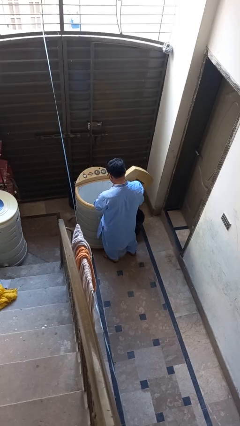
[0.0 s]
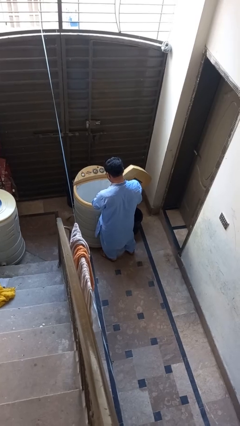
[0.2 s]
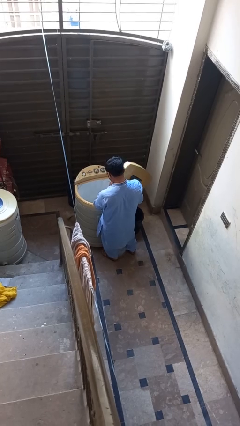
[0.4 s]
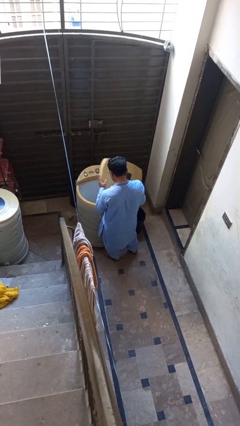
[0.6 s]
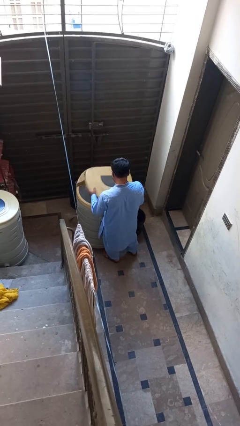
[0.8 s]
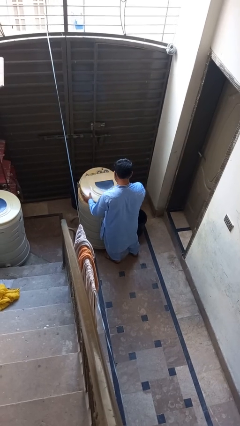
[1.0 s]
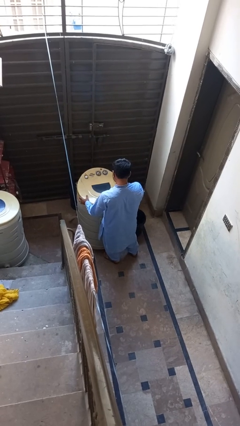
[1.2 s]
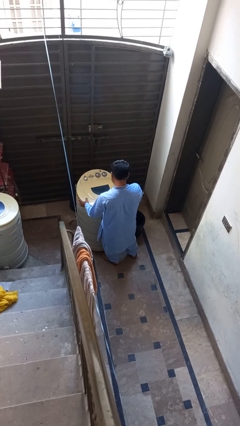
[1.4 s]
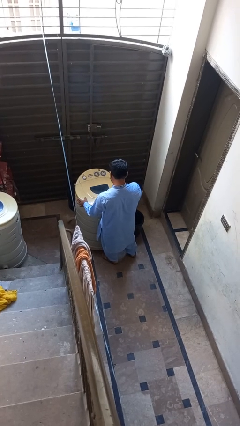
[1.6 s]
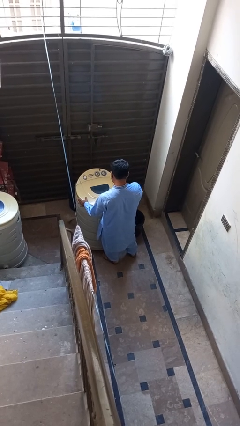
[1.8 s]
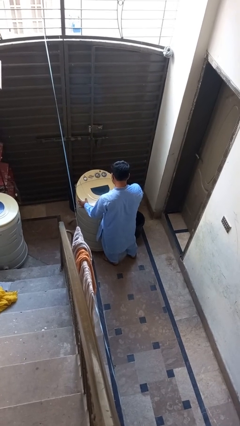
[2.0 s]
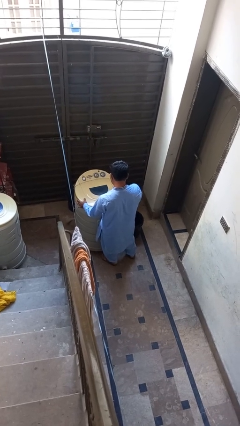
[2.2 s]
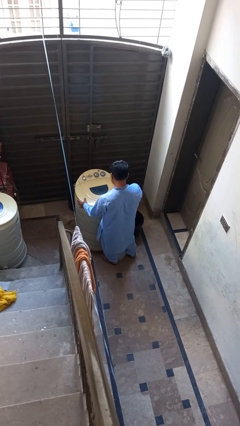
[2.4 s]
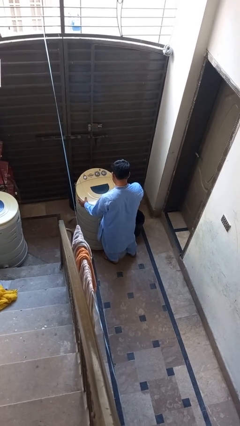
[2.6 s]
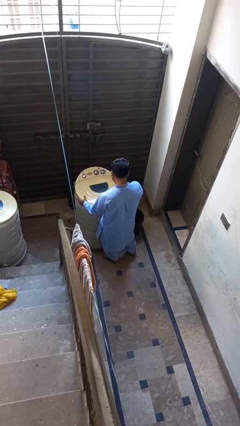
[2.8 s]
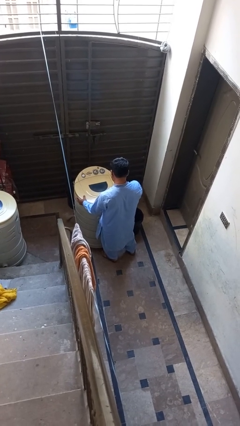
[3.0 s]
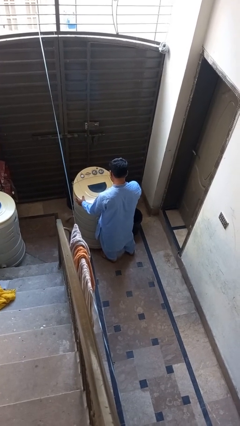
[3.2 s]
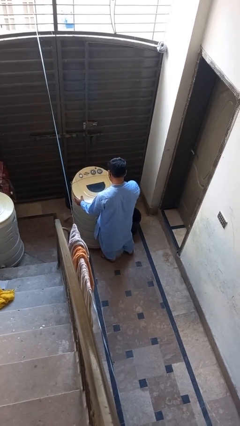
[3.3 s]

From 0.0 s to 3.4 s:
person closes clothes washer

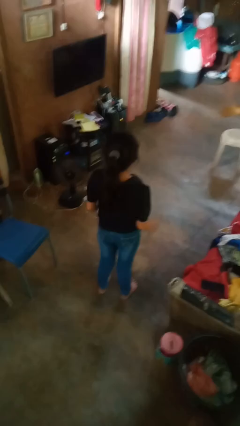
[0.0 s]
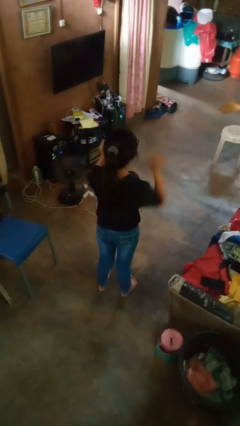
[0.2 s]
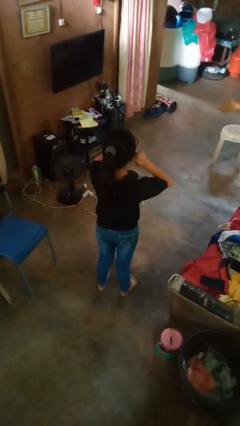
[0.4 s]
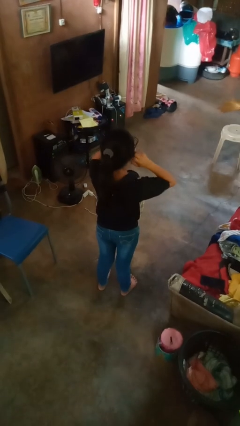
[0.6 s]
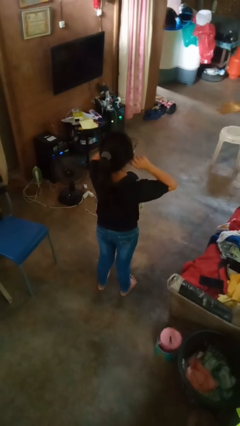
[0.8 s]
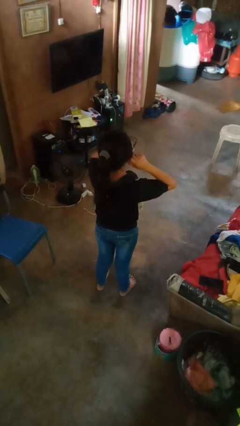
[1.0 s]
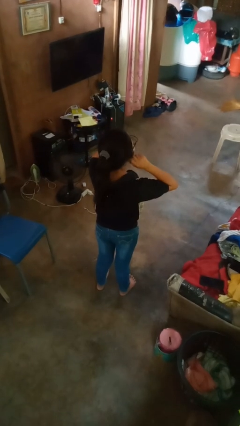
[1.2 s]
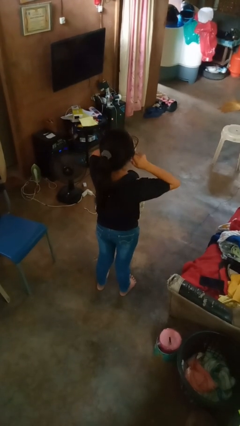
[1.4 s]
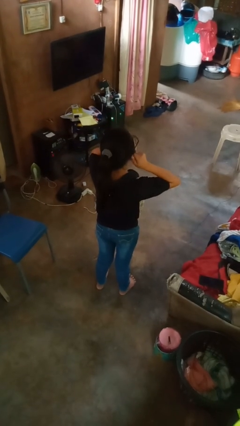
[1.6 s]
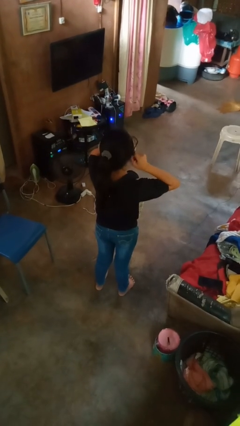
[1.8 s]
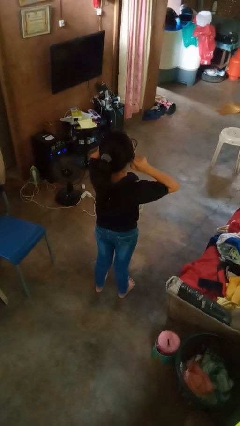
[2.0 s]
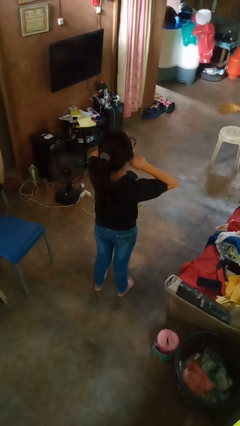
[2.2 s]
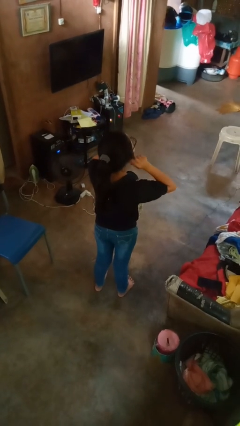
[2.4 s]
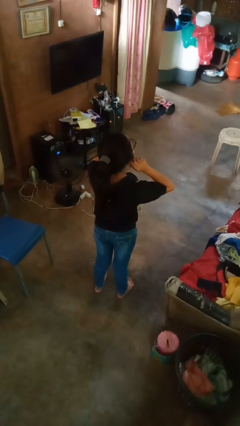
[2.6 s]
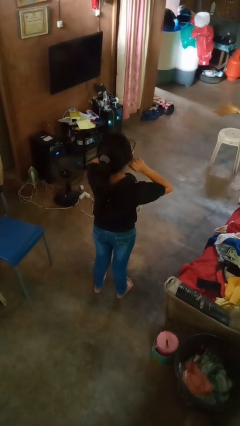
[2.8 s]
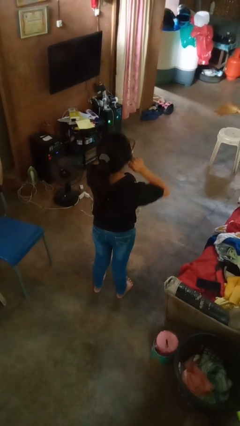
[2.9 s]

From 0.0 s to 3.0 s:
person touches earlobe

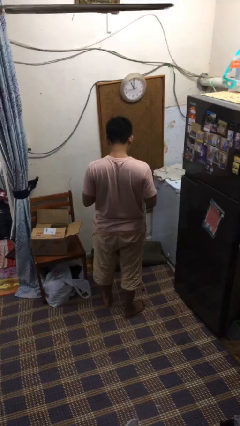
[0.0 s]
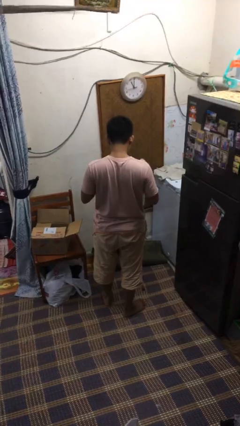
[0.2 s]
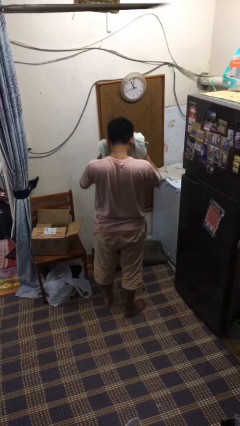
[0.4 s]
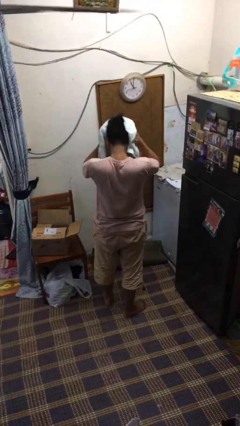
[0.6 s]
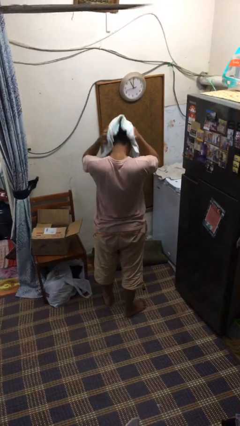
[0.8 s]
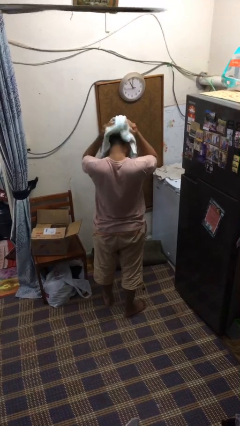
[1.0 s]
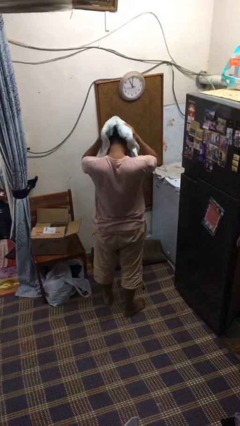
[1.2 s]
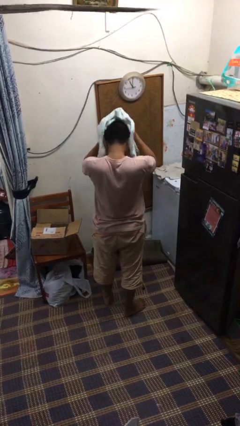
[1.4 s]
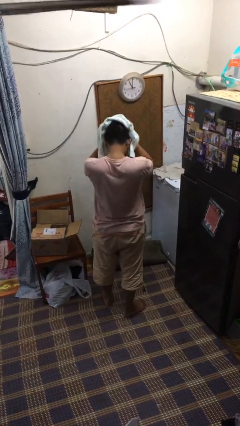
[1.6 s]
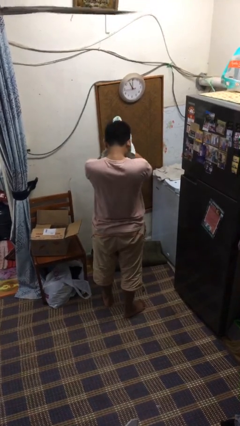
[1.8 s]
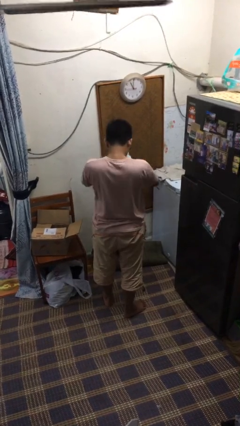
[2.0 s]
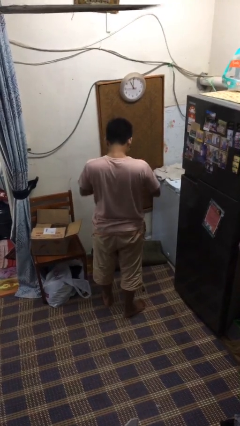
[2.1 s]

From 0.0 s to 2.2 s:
person dries hair with towel

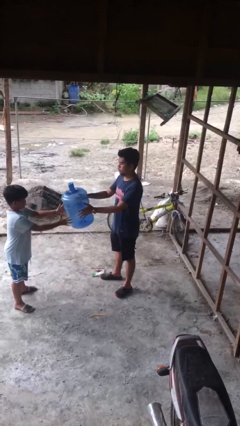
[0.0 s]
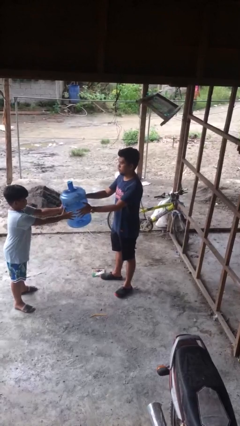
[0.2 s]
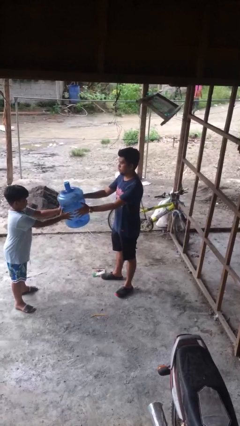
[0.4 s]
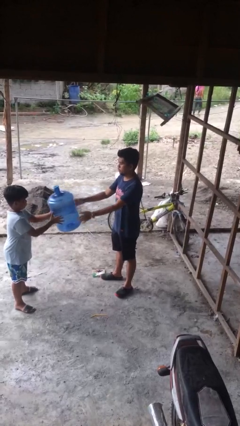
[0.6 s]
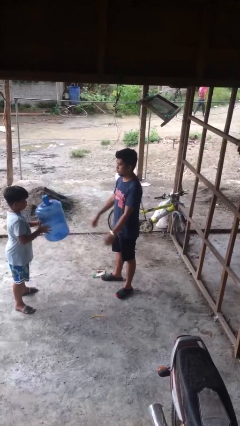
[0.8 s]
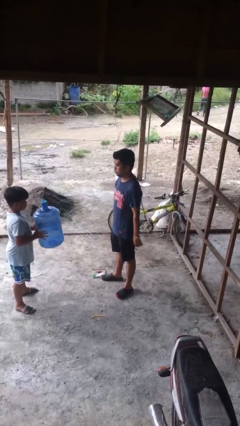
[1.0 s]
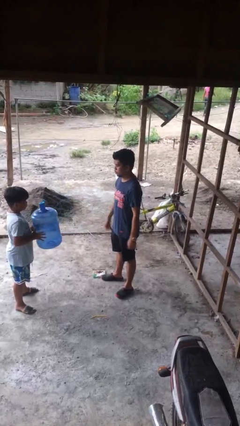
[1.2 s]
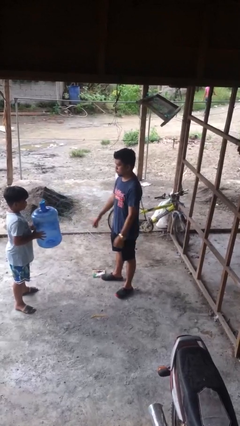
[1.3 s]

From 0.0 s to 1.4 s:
person transfers object to person

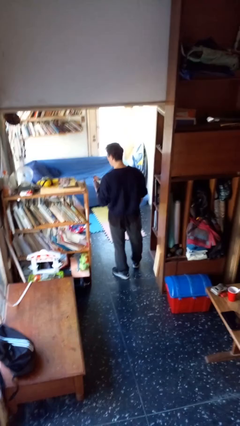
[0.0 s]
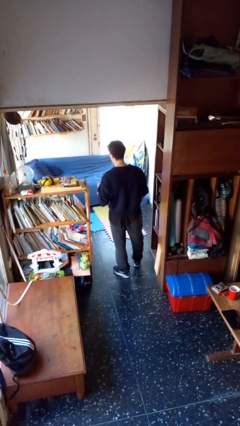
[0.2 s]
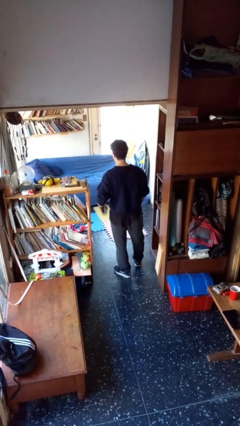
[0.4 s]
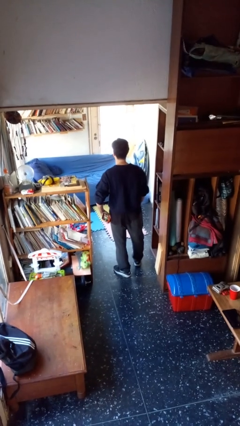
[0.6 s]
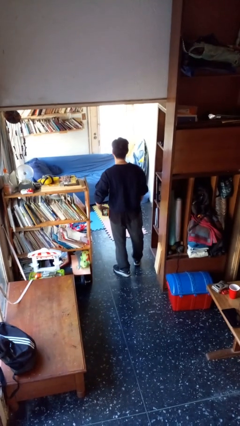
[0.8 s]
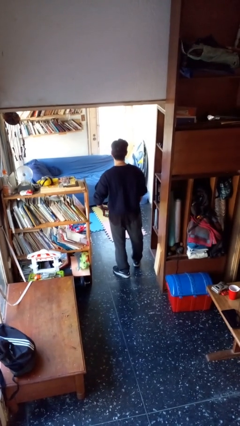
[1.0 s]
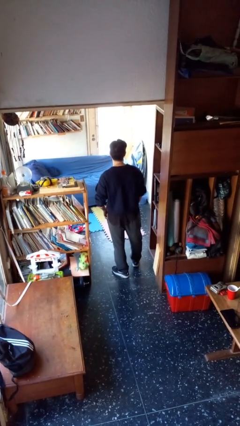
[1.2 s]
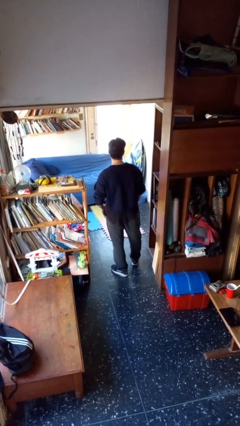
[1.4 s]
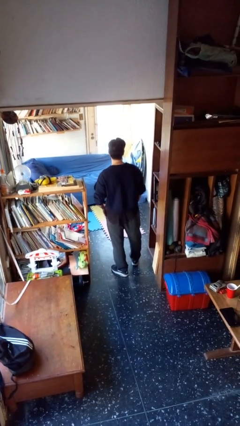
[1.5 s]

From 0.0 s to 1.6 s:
person puts phone into pocket

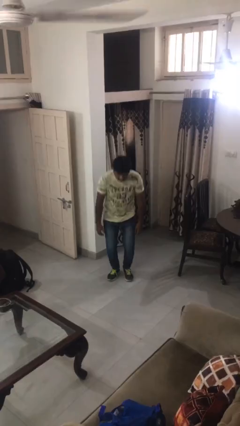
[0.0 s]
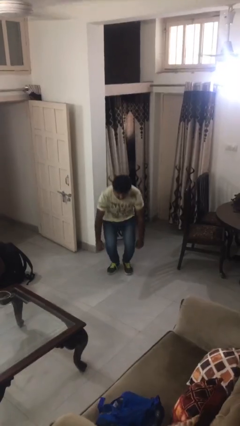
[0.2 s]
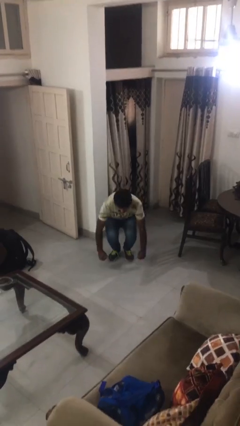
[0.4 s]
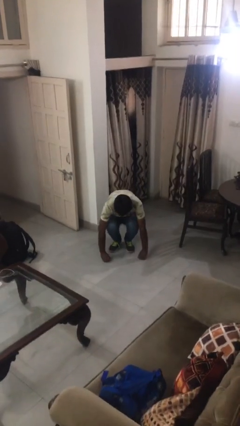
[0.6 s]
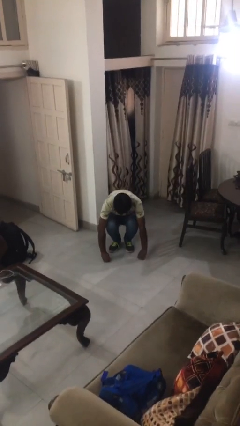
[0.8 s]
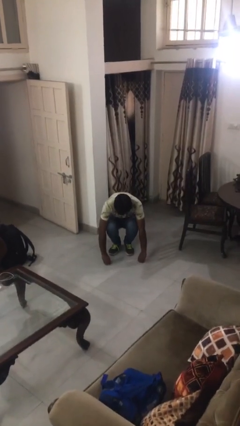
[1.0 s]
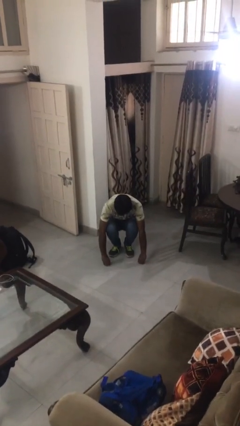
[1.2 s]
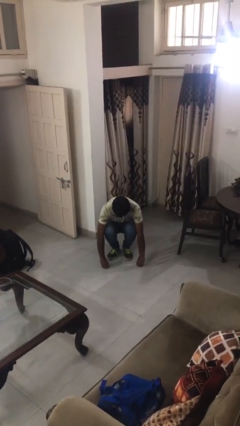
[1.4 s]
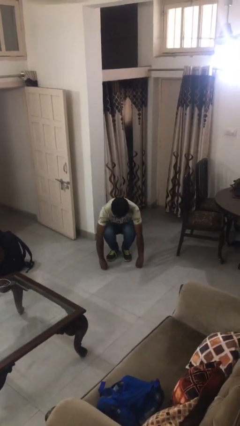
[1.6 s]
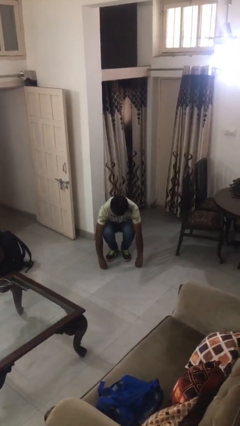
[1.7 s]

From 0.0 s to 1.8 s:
person squats

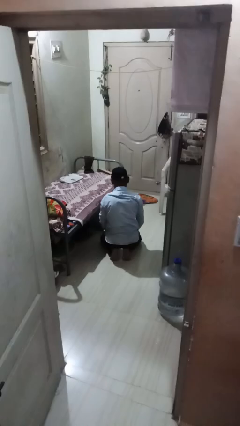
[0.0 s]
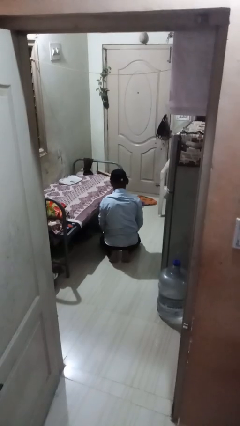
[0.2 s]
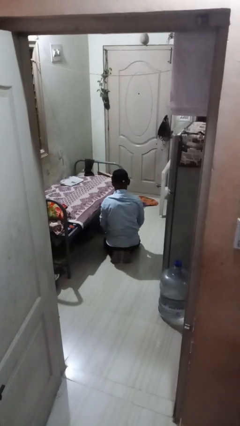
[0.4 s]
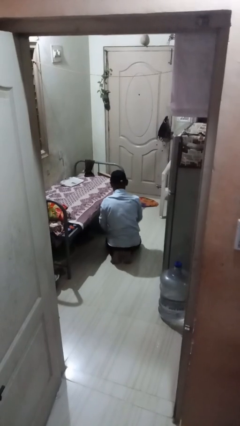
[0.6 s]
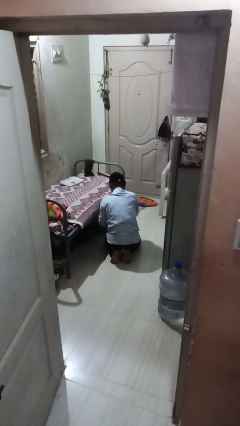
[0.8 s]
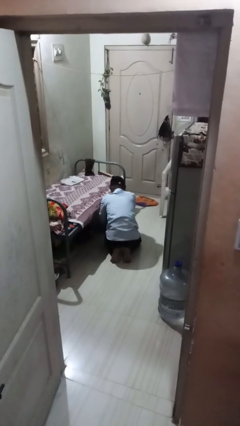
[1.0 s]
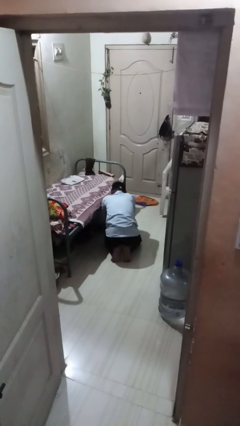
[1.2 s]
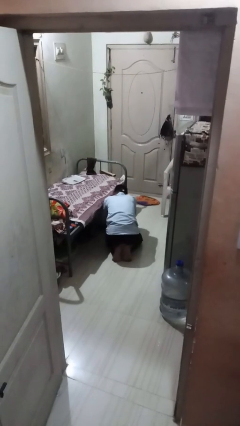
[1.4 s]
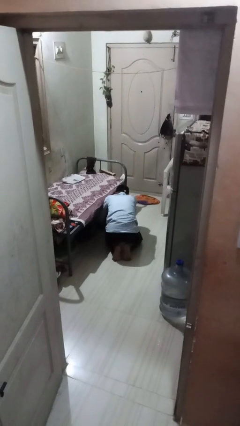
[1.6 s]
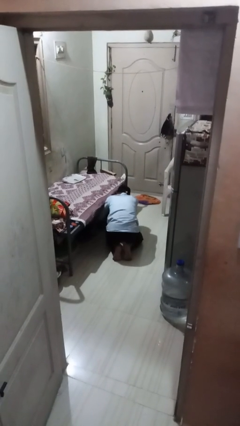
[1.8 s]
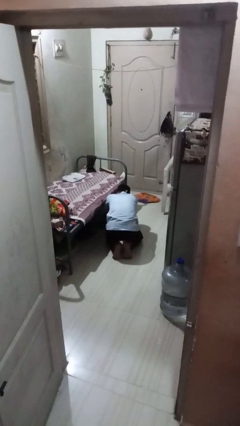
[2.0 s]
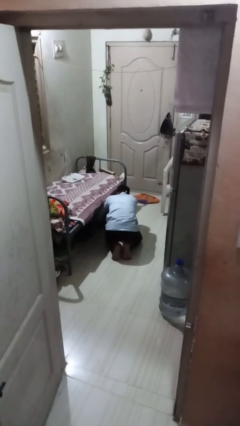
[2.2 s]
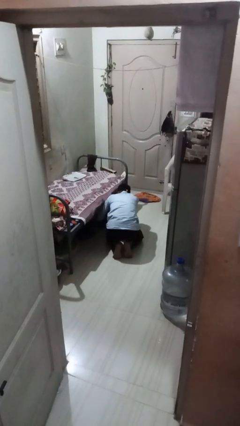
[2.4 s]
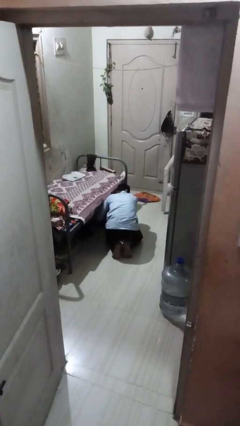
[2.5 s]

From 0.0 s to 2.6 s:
person searches under bed

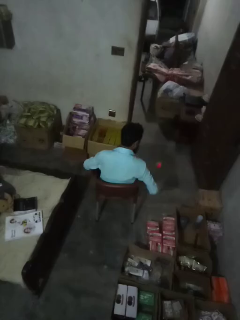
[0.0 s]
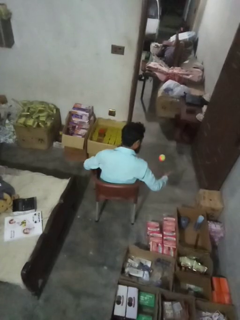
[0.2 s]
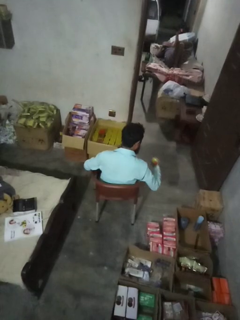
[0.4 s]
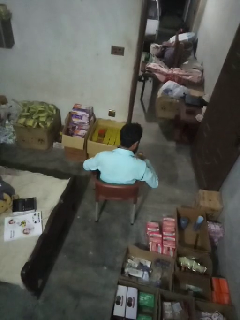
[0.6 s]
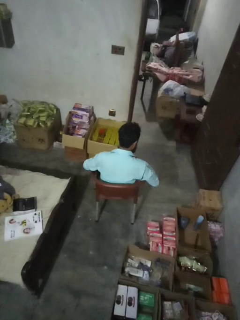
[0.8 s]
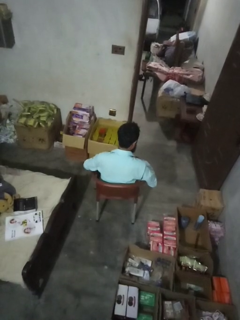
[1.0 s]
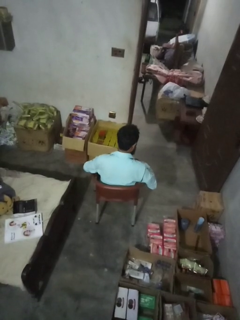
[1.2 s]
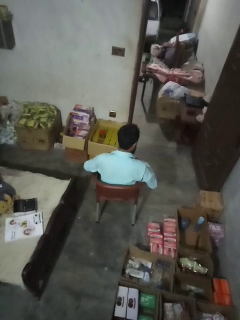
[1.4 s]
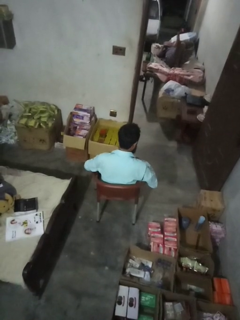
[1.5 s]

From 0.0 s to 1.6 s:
person bounces ball on floor
